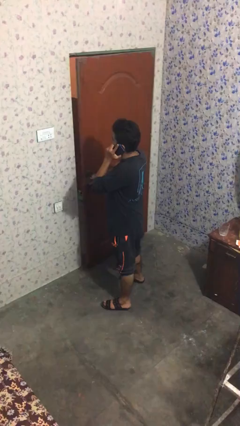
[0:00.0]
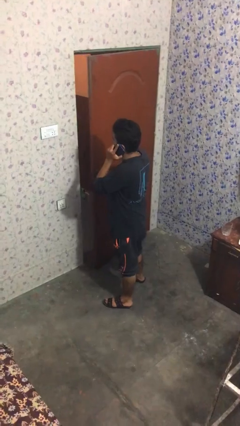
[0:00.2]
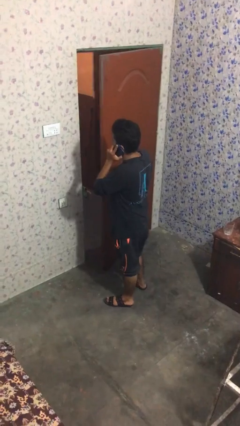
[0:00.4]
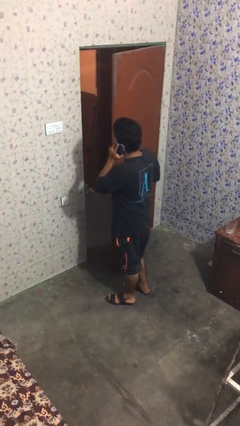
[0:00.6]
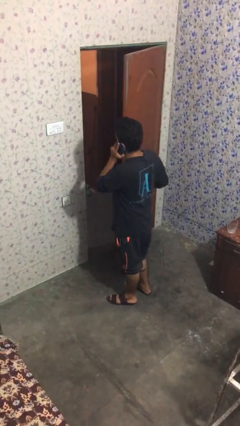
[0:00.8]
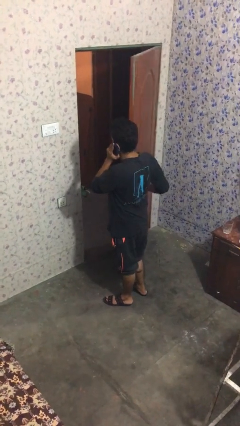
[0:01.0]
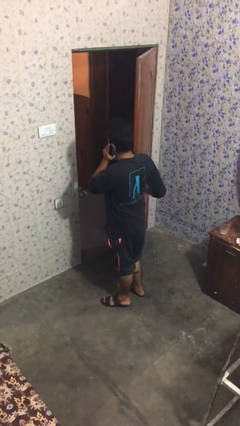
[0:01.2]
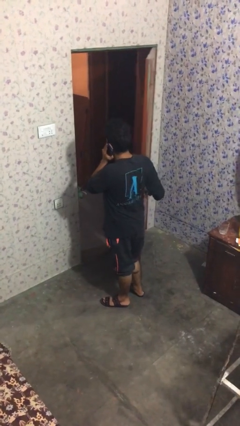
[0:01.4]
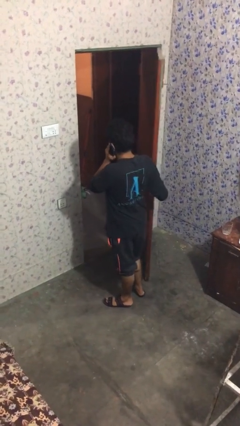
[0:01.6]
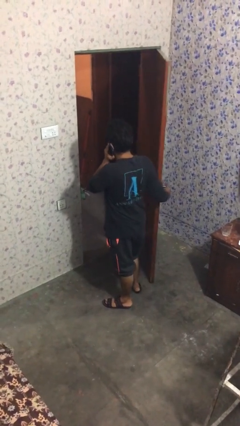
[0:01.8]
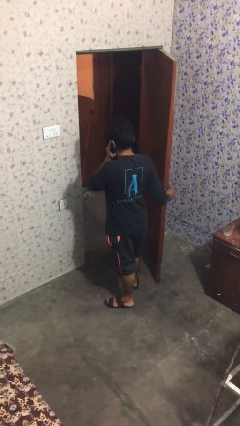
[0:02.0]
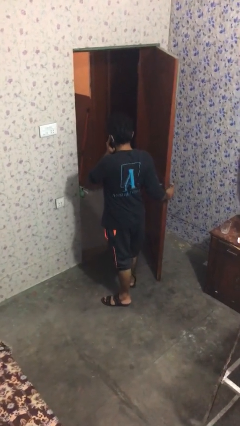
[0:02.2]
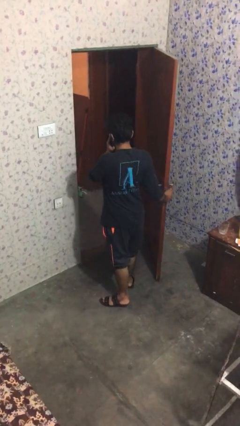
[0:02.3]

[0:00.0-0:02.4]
person opens facility door

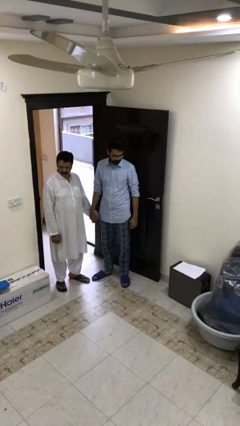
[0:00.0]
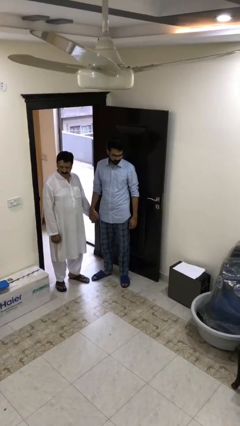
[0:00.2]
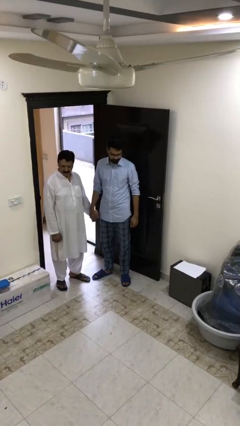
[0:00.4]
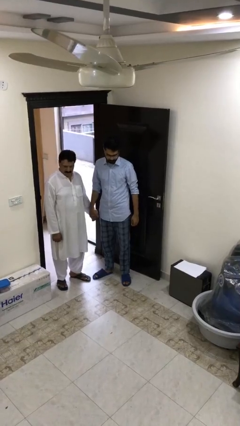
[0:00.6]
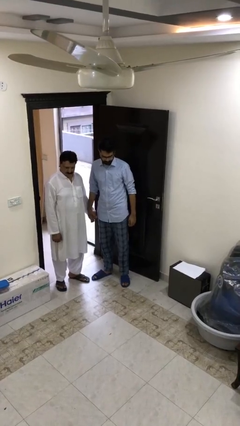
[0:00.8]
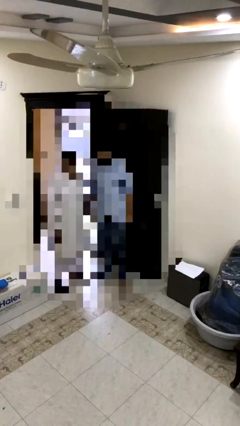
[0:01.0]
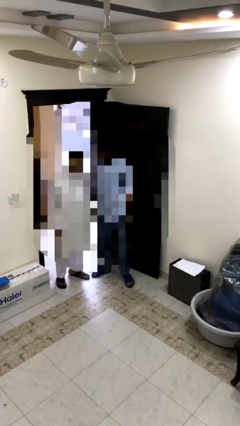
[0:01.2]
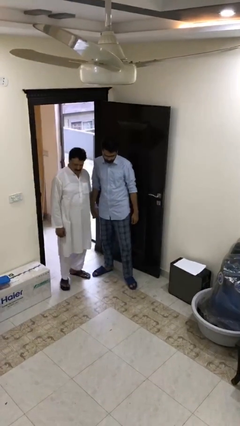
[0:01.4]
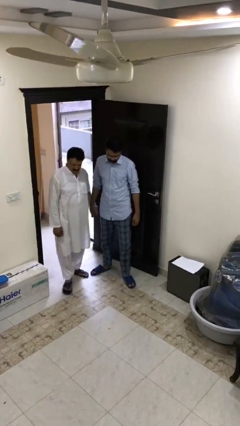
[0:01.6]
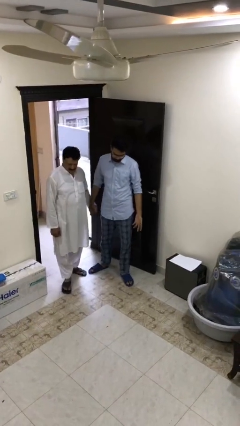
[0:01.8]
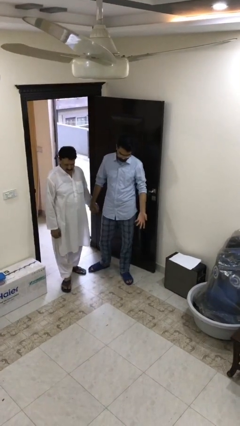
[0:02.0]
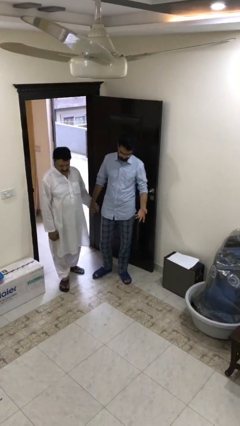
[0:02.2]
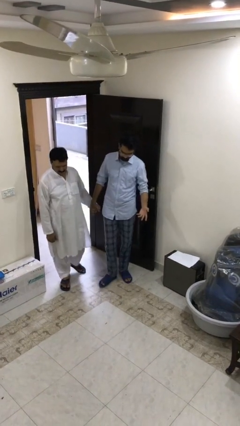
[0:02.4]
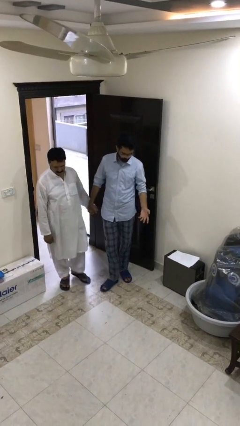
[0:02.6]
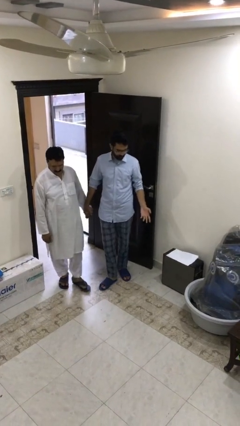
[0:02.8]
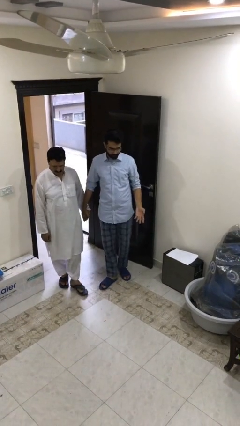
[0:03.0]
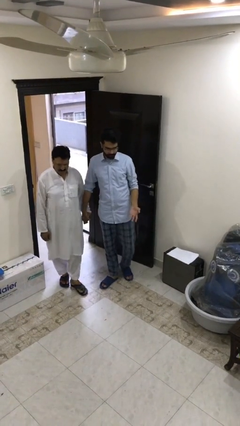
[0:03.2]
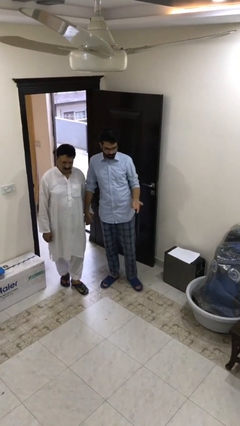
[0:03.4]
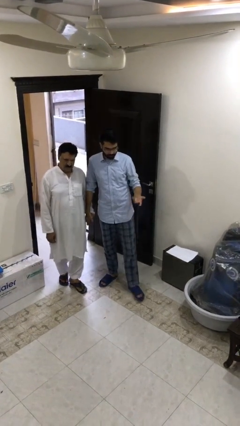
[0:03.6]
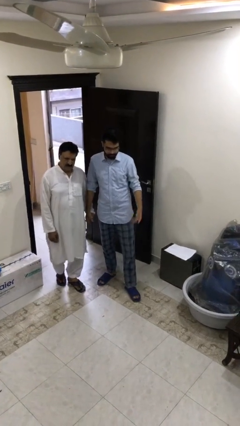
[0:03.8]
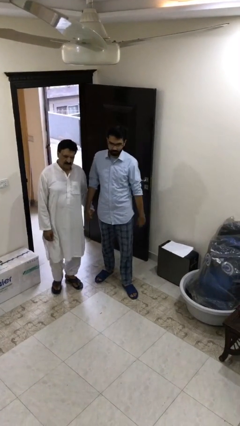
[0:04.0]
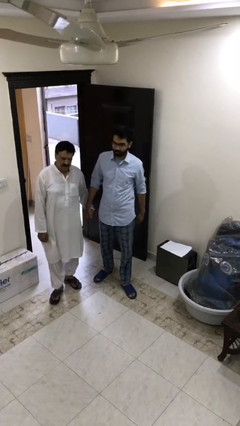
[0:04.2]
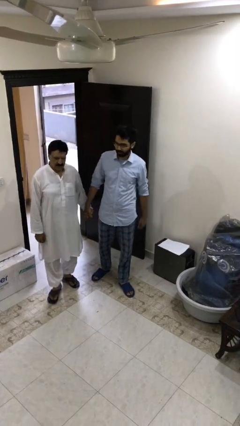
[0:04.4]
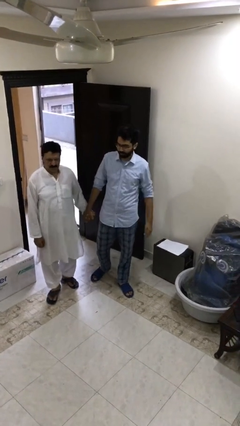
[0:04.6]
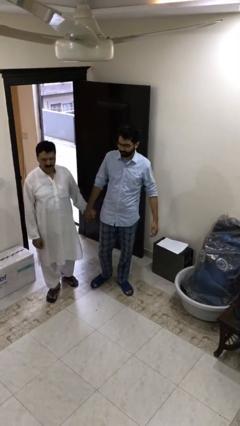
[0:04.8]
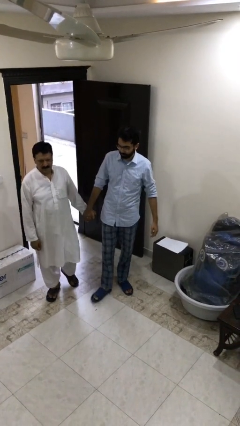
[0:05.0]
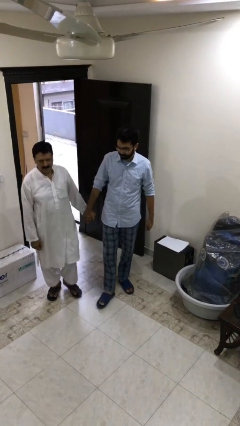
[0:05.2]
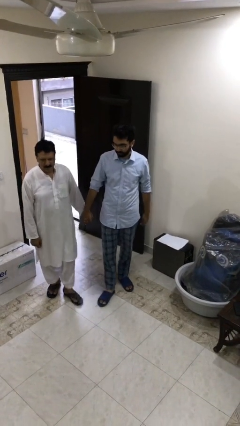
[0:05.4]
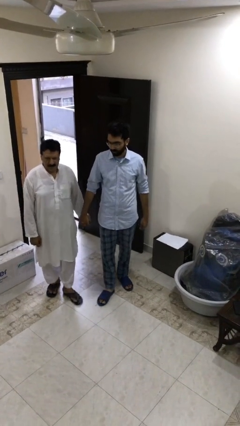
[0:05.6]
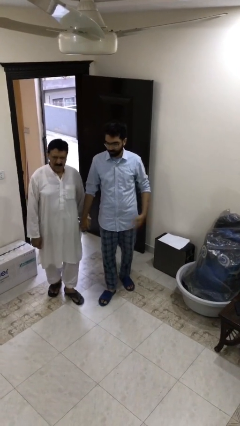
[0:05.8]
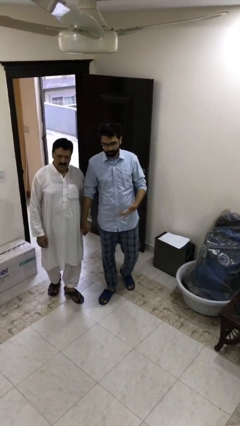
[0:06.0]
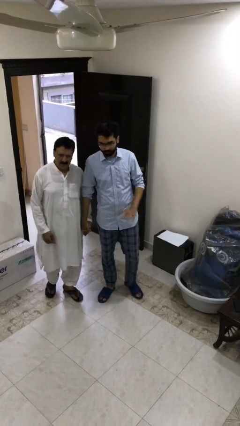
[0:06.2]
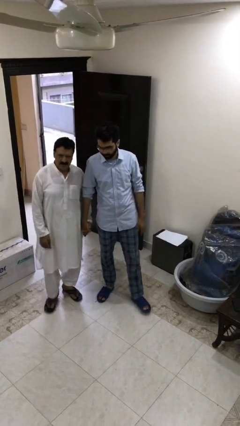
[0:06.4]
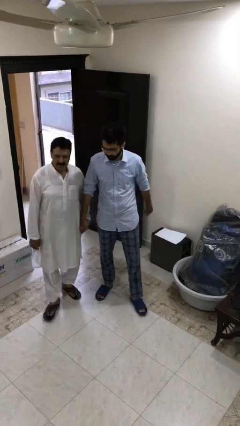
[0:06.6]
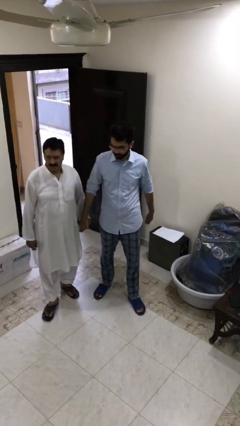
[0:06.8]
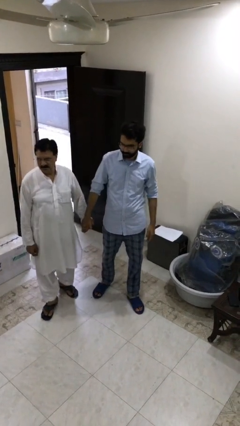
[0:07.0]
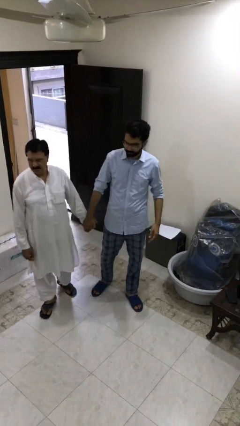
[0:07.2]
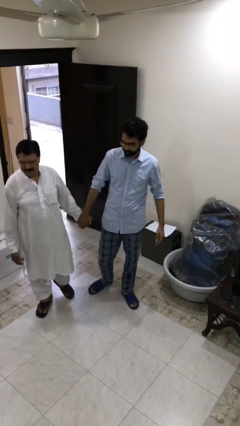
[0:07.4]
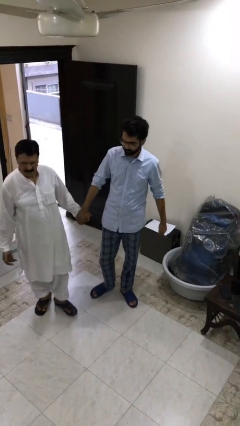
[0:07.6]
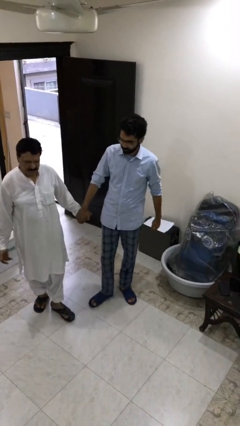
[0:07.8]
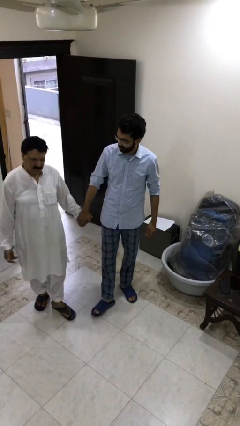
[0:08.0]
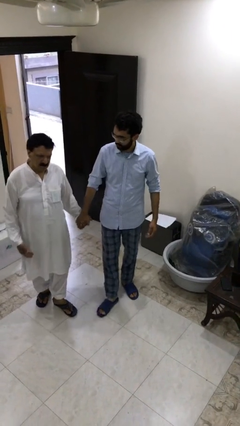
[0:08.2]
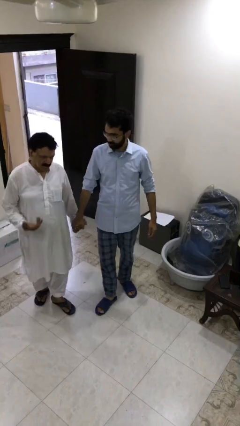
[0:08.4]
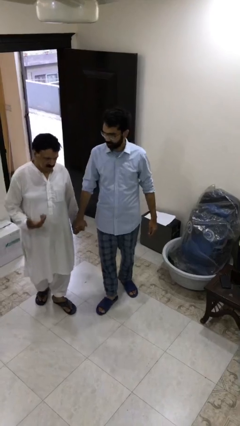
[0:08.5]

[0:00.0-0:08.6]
person holds hand

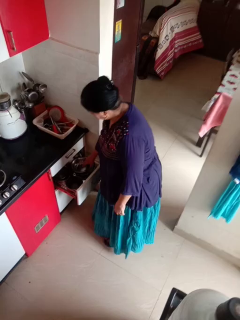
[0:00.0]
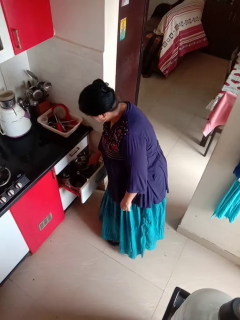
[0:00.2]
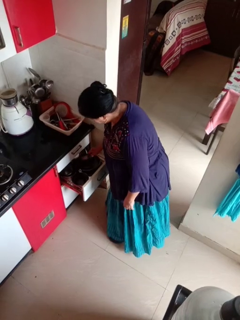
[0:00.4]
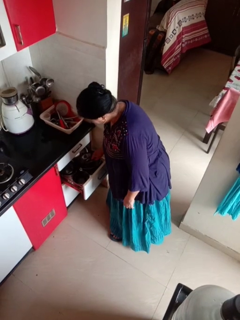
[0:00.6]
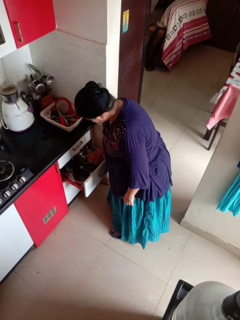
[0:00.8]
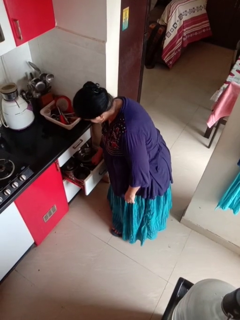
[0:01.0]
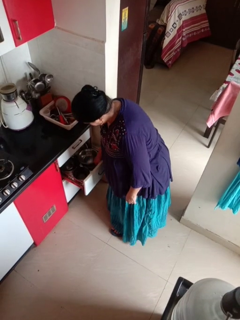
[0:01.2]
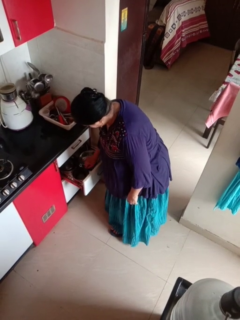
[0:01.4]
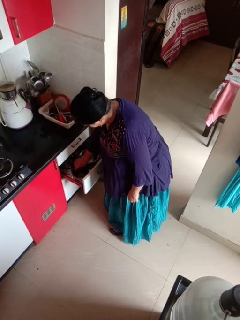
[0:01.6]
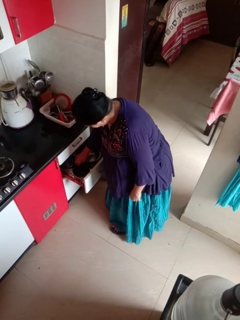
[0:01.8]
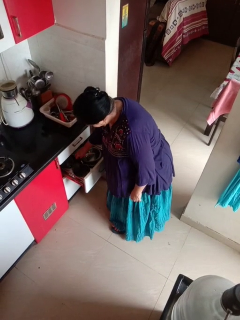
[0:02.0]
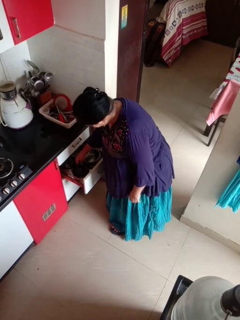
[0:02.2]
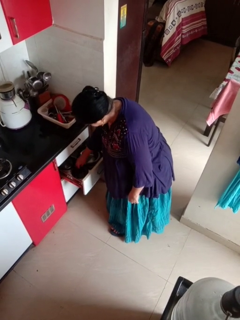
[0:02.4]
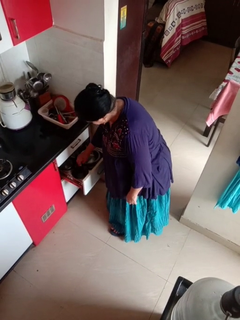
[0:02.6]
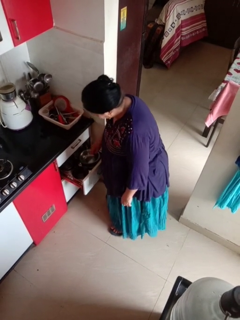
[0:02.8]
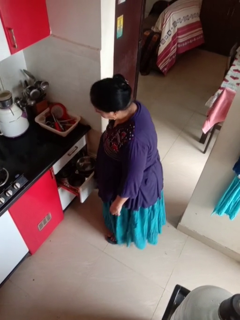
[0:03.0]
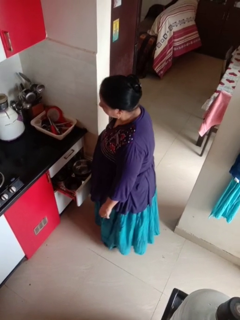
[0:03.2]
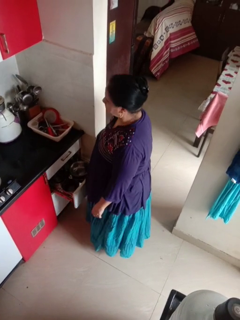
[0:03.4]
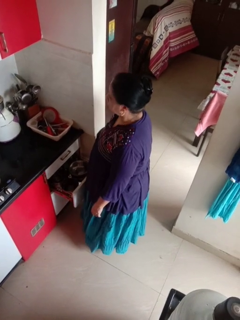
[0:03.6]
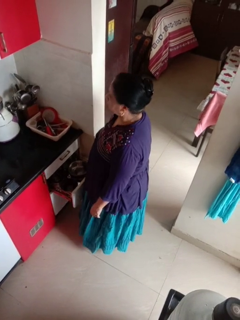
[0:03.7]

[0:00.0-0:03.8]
person searches in kitchen drawer

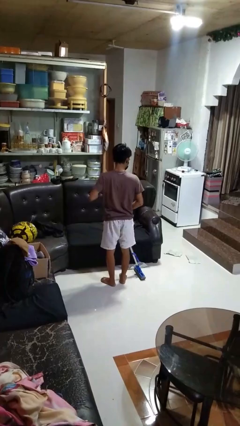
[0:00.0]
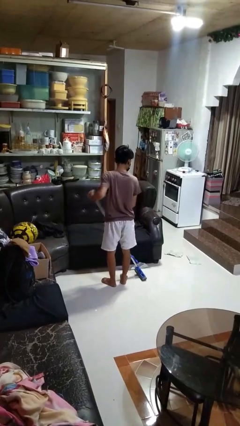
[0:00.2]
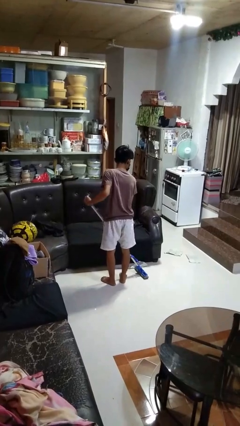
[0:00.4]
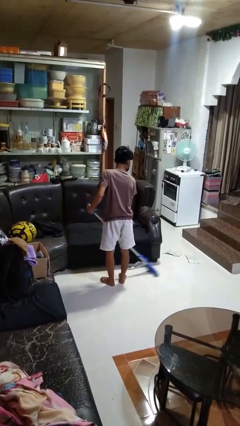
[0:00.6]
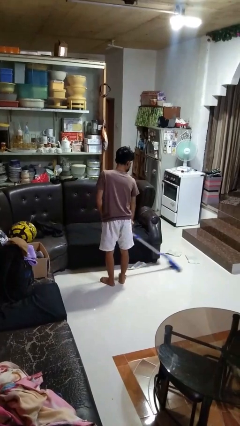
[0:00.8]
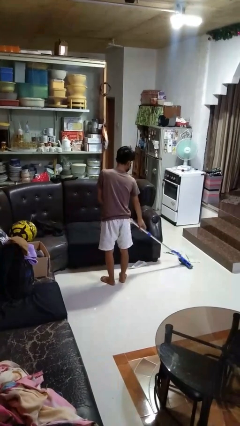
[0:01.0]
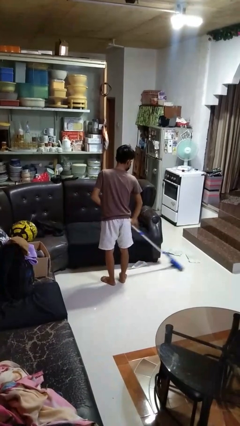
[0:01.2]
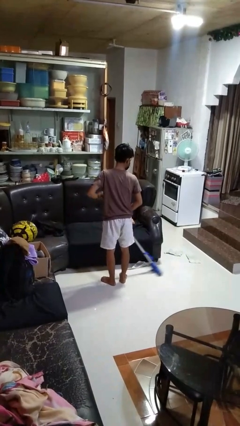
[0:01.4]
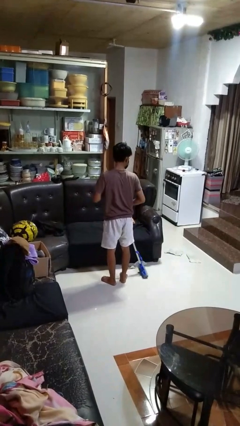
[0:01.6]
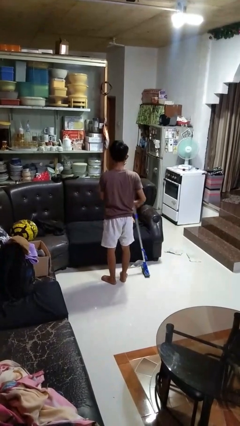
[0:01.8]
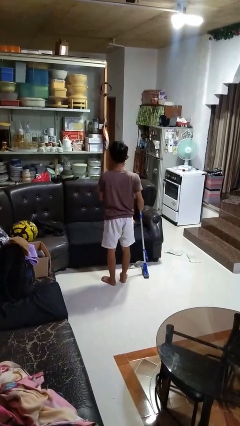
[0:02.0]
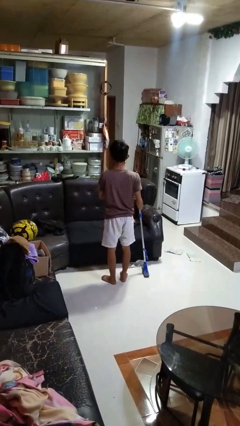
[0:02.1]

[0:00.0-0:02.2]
person mops

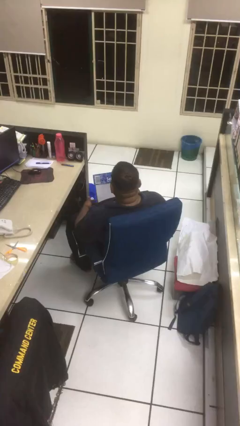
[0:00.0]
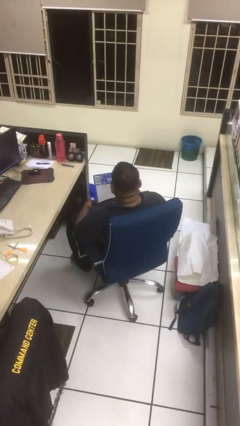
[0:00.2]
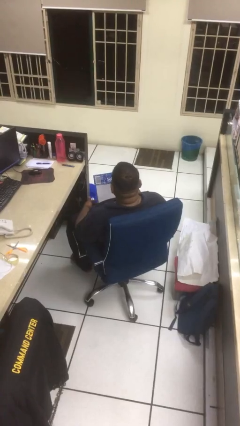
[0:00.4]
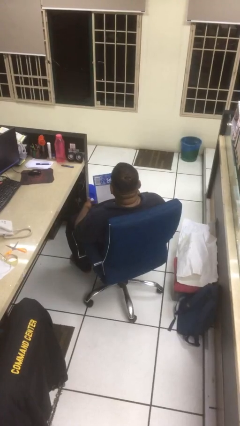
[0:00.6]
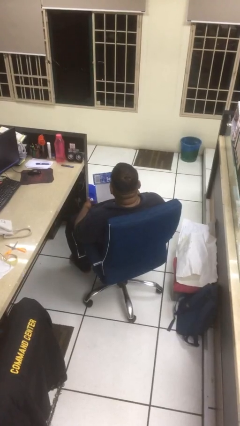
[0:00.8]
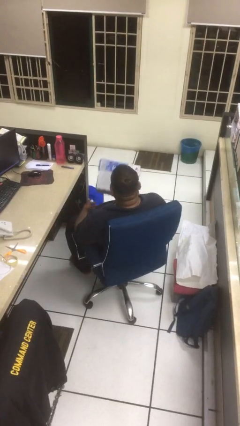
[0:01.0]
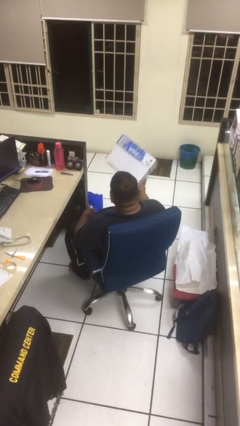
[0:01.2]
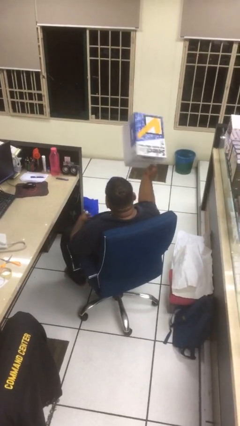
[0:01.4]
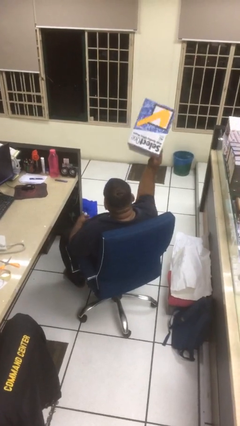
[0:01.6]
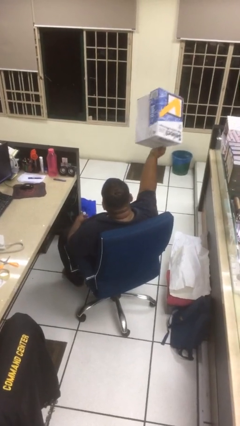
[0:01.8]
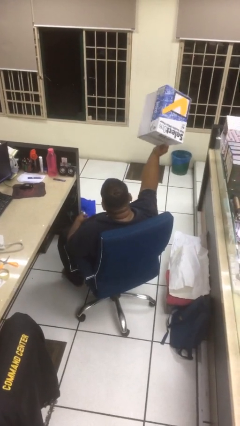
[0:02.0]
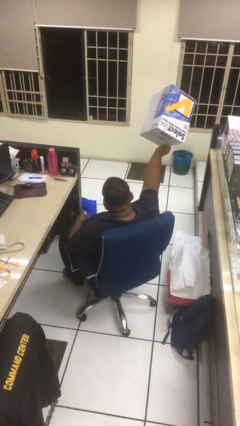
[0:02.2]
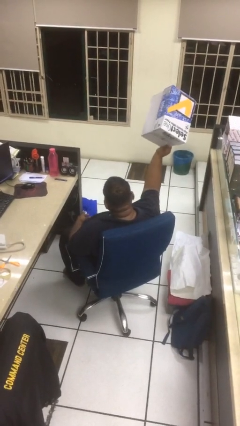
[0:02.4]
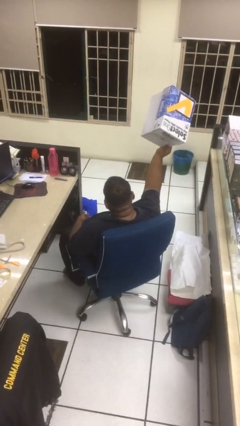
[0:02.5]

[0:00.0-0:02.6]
person holds object above head
